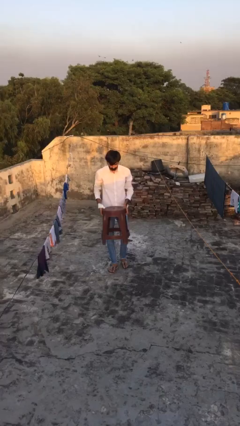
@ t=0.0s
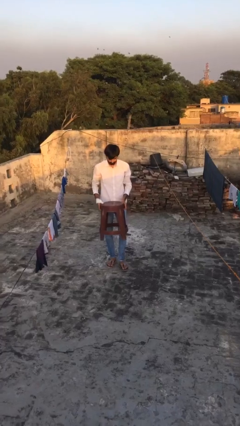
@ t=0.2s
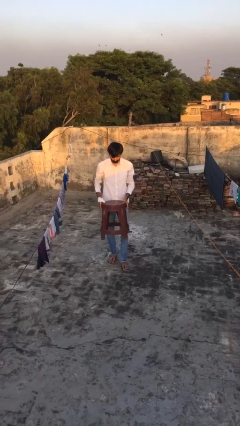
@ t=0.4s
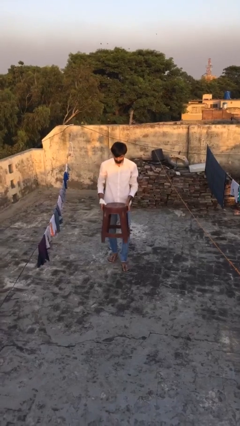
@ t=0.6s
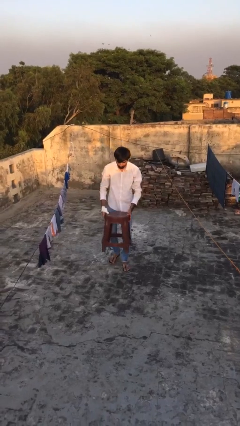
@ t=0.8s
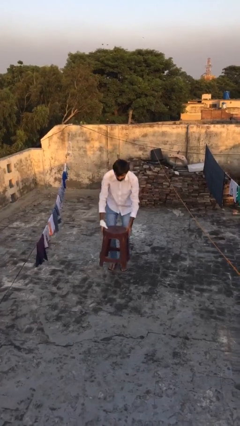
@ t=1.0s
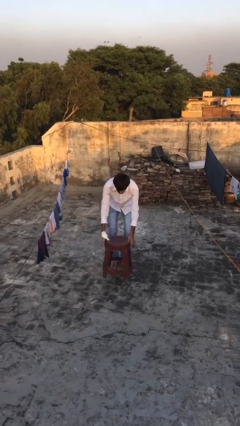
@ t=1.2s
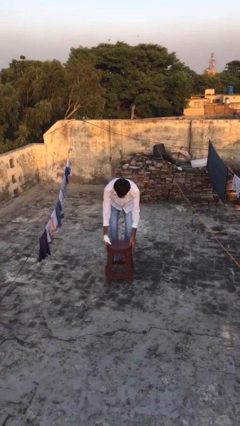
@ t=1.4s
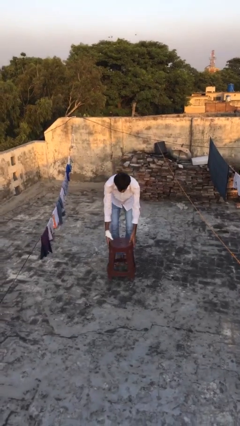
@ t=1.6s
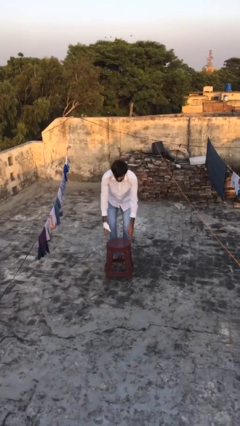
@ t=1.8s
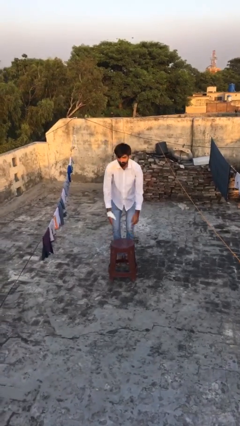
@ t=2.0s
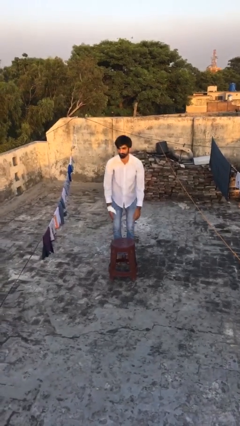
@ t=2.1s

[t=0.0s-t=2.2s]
person puts down object on floor

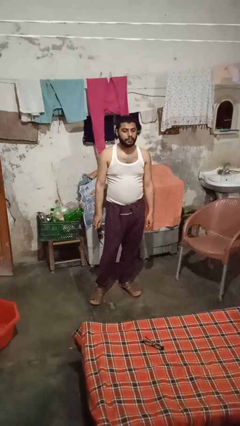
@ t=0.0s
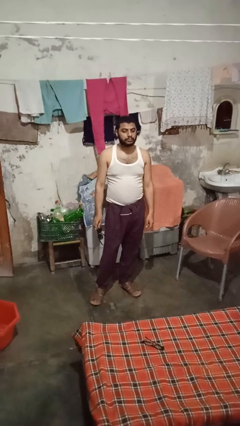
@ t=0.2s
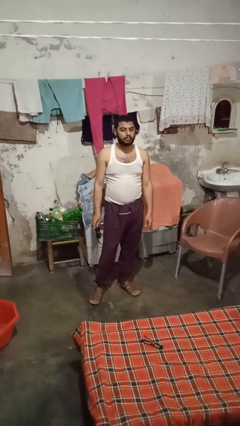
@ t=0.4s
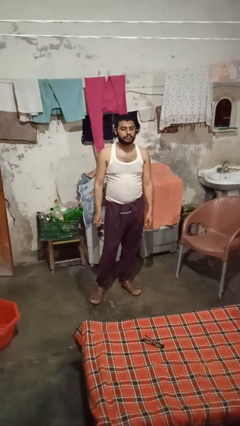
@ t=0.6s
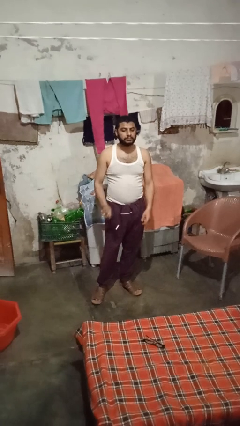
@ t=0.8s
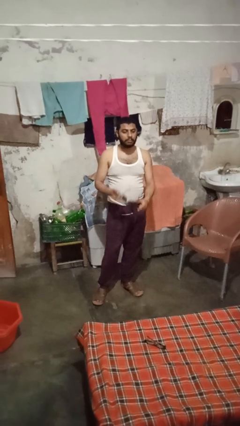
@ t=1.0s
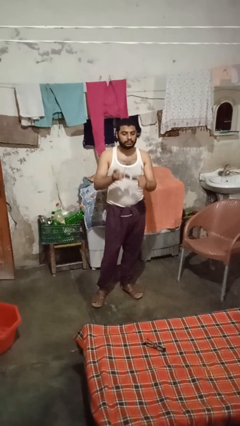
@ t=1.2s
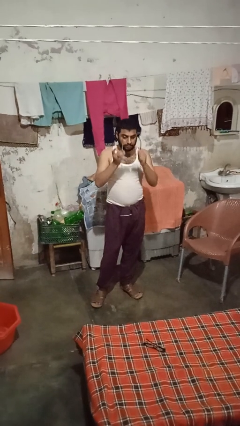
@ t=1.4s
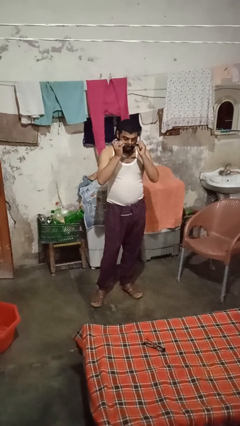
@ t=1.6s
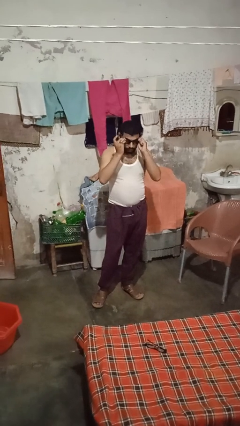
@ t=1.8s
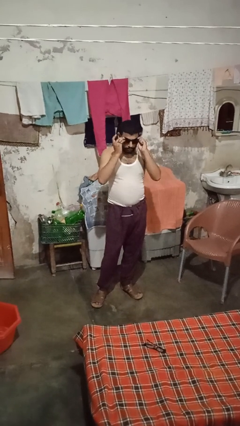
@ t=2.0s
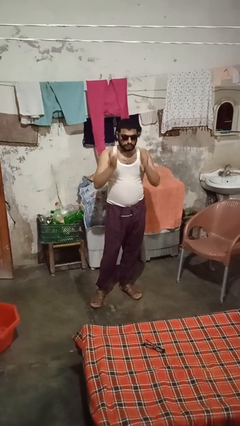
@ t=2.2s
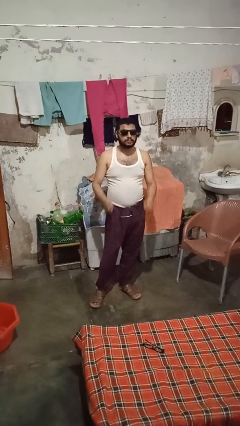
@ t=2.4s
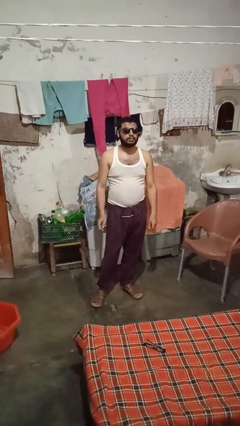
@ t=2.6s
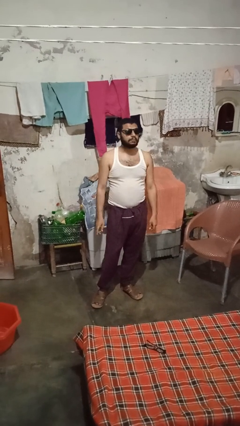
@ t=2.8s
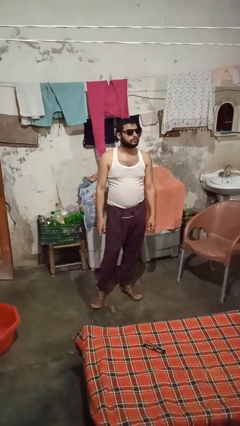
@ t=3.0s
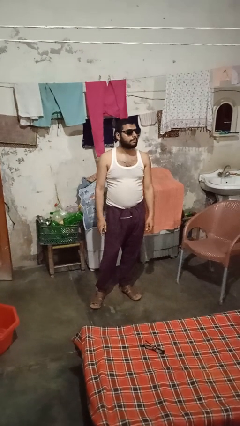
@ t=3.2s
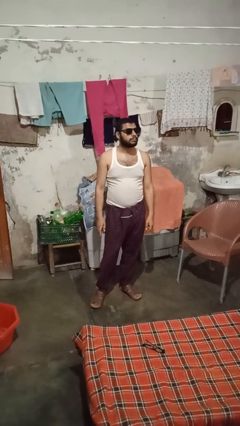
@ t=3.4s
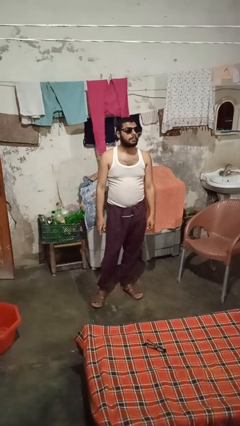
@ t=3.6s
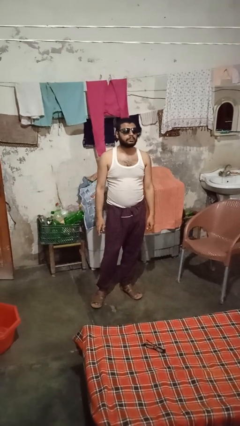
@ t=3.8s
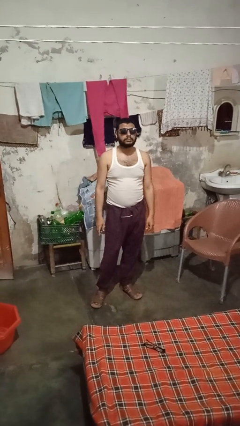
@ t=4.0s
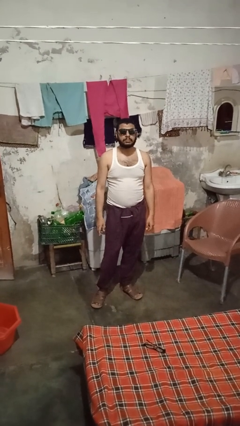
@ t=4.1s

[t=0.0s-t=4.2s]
person puts on sunglasses

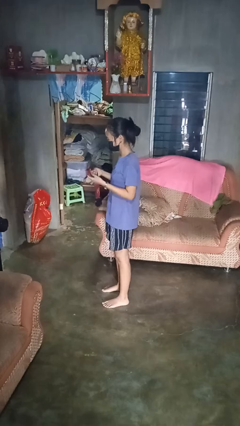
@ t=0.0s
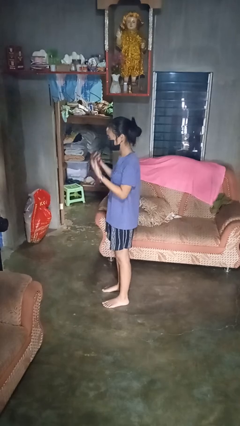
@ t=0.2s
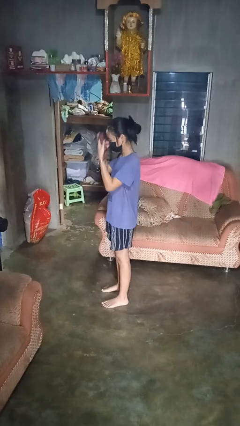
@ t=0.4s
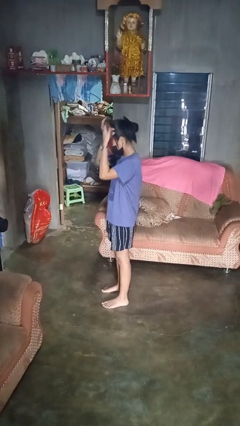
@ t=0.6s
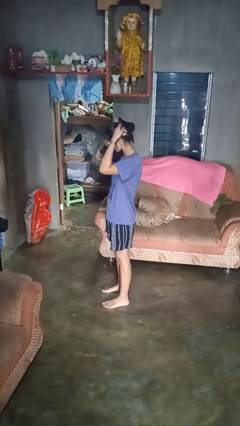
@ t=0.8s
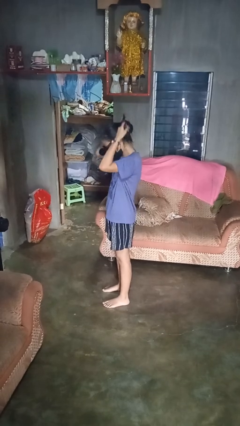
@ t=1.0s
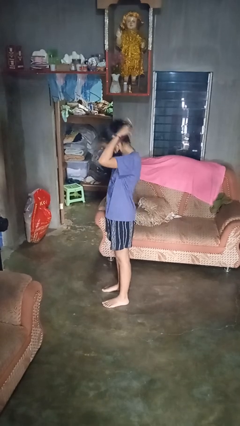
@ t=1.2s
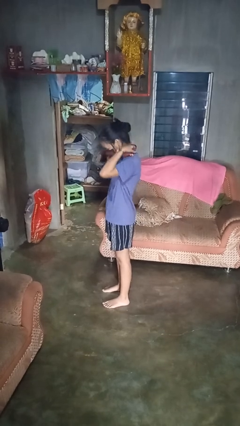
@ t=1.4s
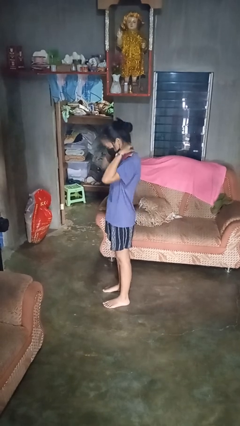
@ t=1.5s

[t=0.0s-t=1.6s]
person puts on necklace

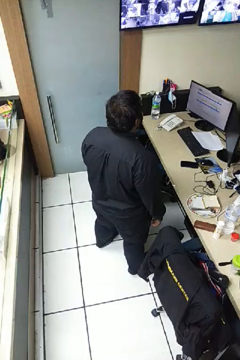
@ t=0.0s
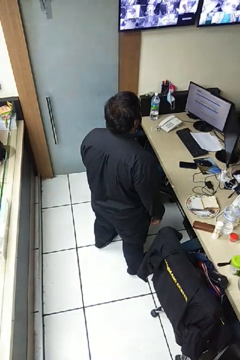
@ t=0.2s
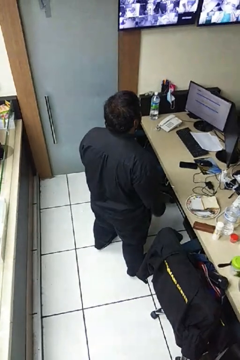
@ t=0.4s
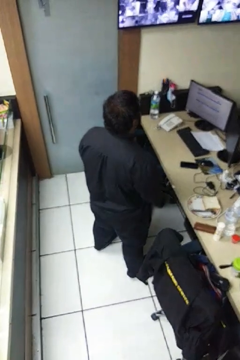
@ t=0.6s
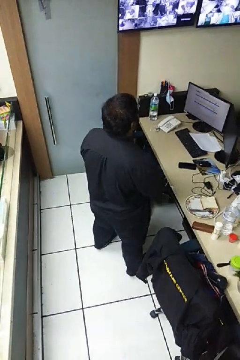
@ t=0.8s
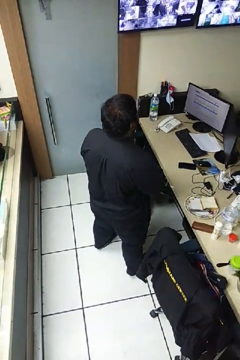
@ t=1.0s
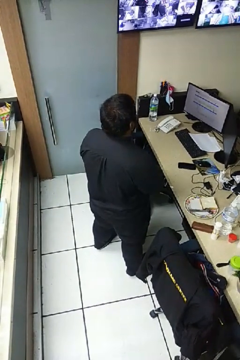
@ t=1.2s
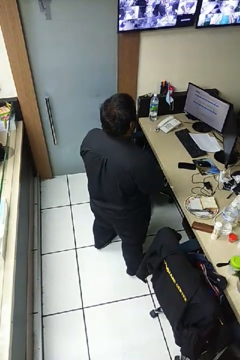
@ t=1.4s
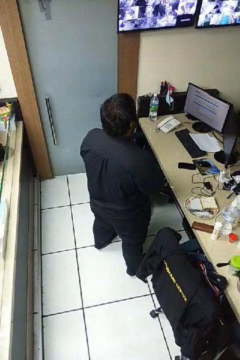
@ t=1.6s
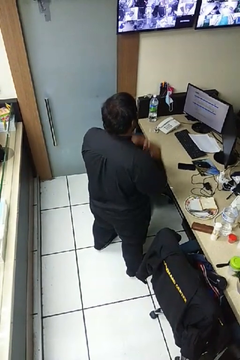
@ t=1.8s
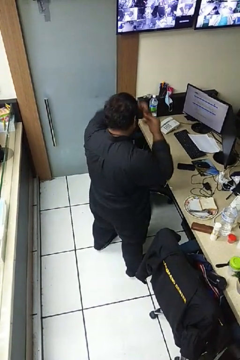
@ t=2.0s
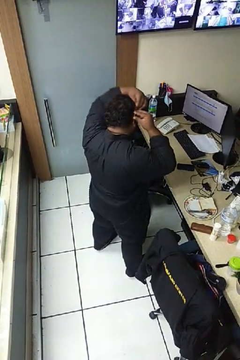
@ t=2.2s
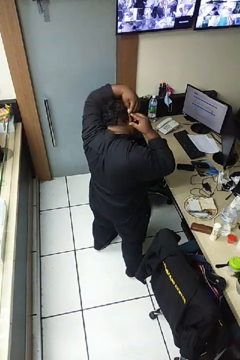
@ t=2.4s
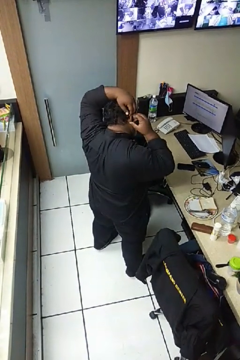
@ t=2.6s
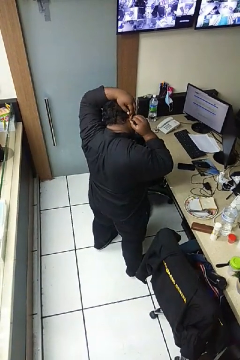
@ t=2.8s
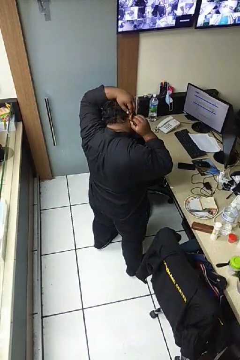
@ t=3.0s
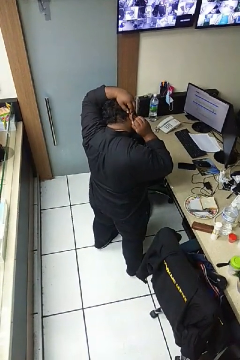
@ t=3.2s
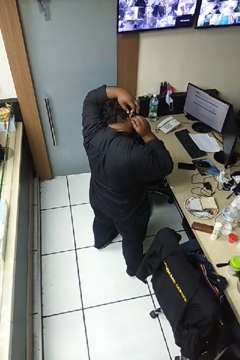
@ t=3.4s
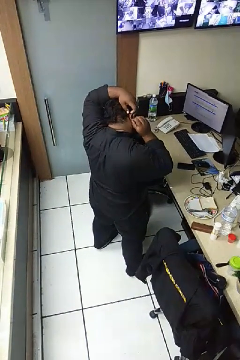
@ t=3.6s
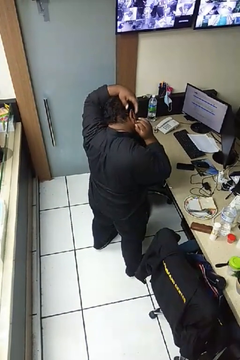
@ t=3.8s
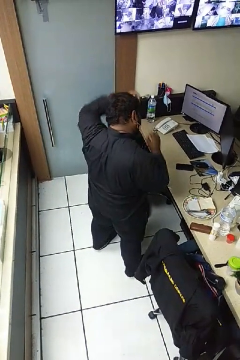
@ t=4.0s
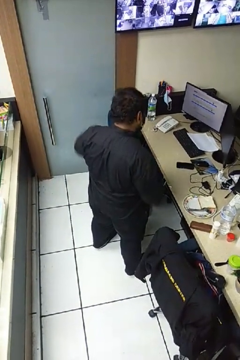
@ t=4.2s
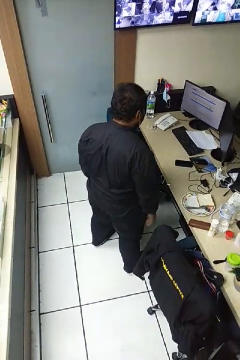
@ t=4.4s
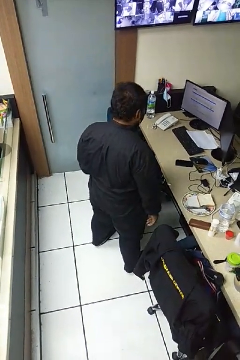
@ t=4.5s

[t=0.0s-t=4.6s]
person puts on earrings

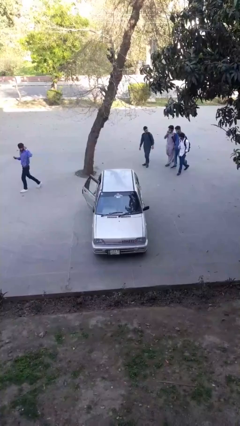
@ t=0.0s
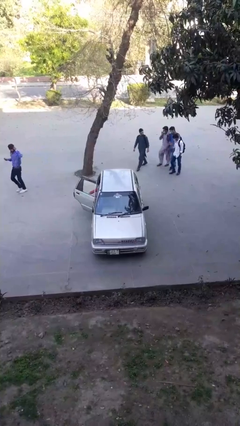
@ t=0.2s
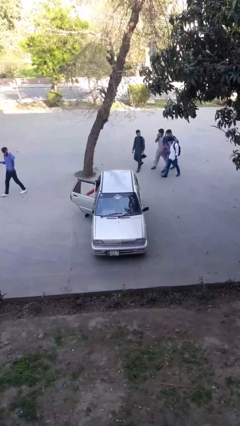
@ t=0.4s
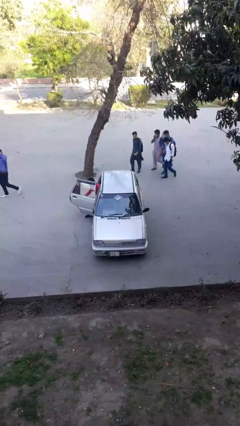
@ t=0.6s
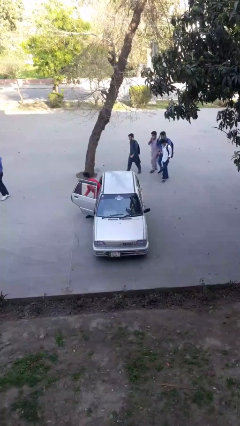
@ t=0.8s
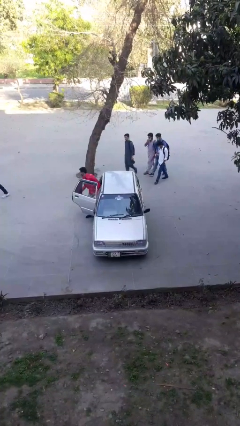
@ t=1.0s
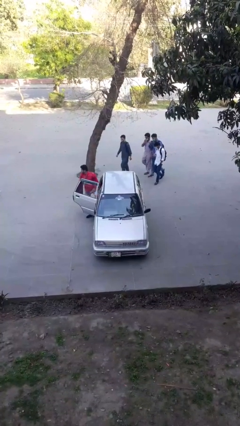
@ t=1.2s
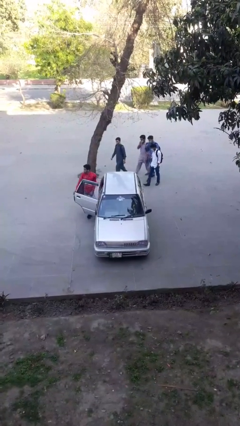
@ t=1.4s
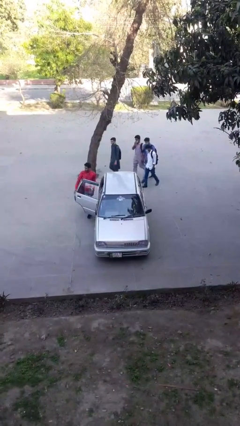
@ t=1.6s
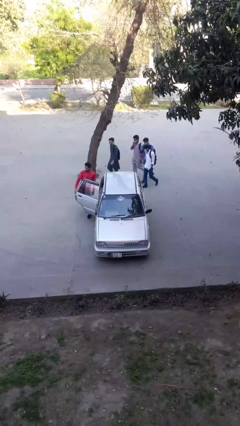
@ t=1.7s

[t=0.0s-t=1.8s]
car drops off person

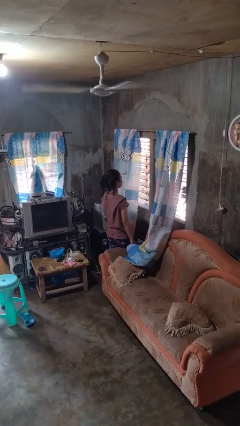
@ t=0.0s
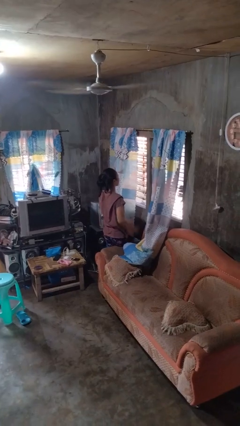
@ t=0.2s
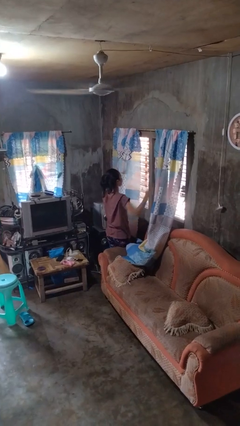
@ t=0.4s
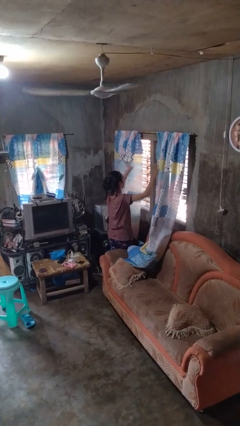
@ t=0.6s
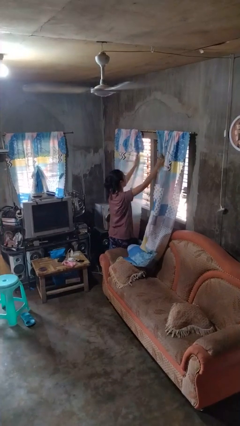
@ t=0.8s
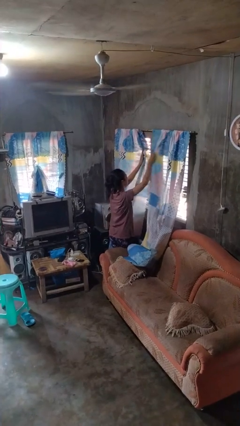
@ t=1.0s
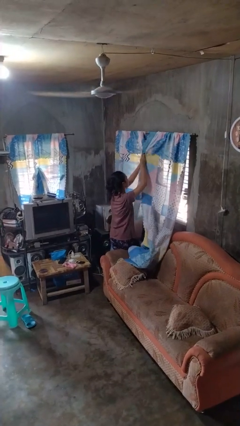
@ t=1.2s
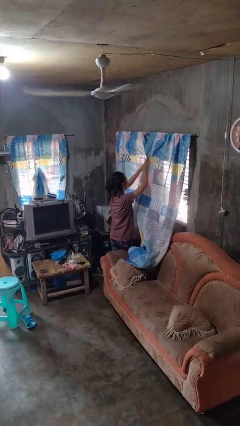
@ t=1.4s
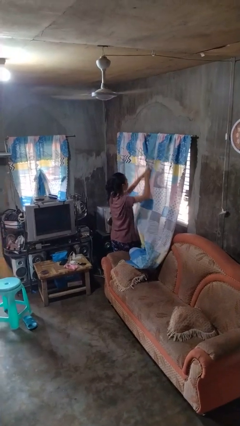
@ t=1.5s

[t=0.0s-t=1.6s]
person closes curtains
